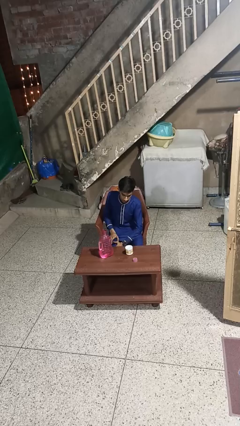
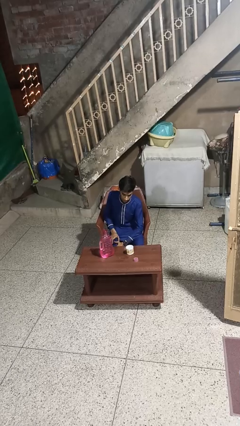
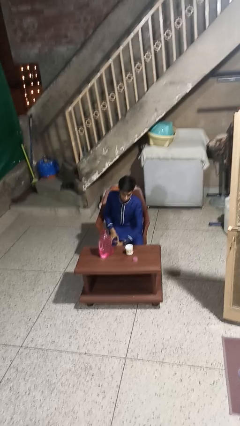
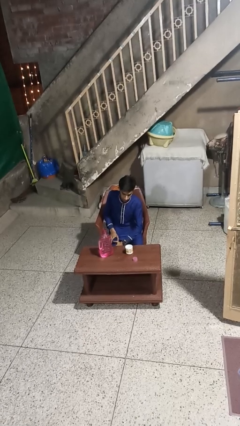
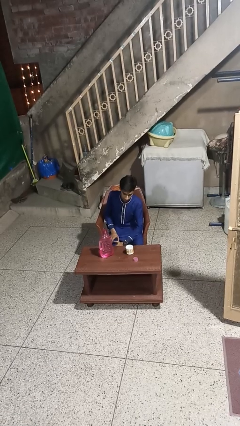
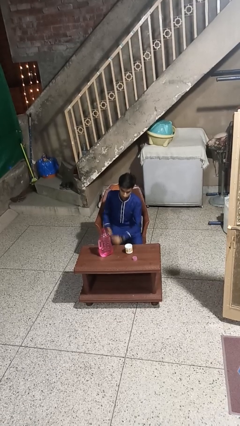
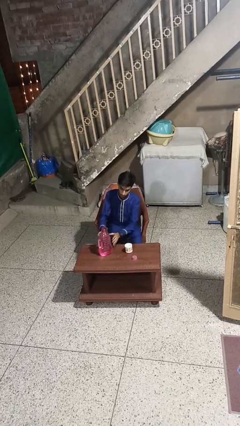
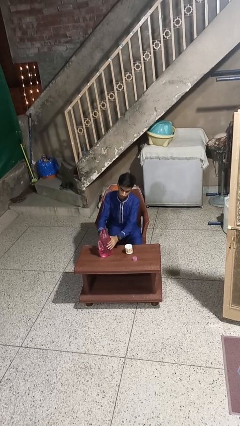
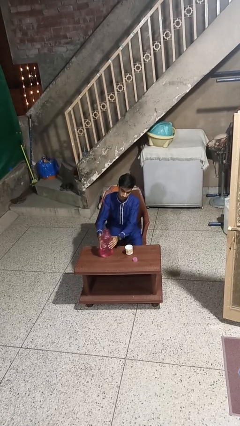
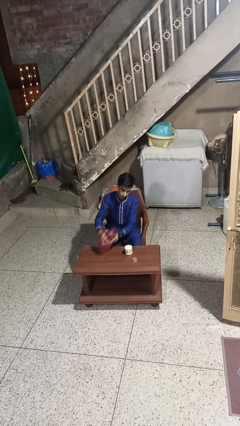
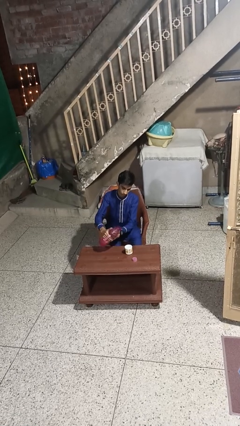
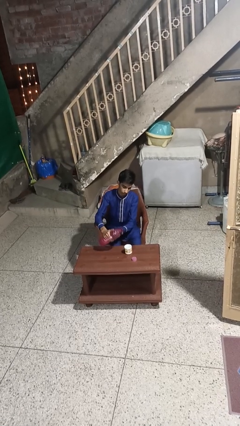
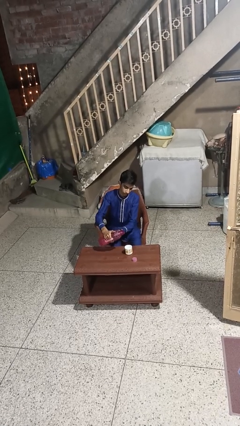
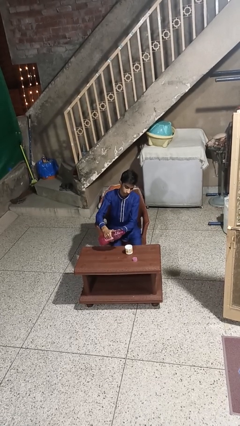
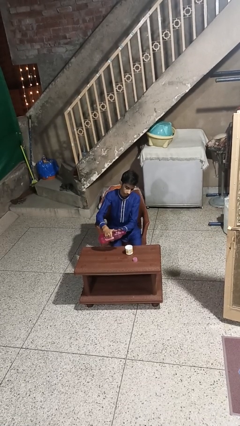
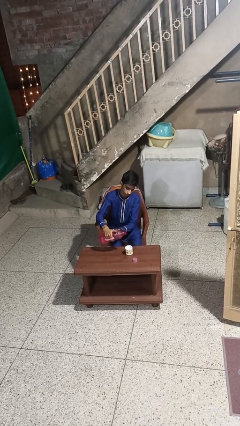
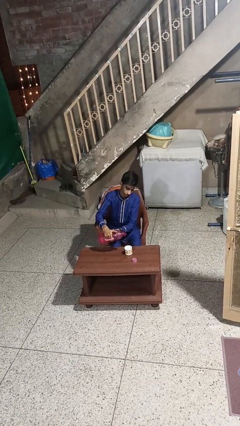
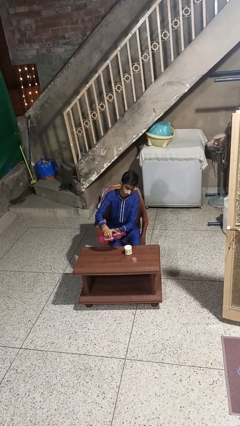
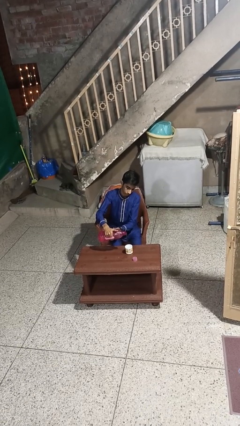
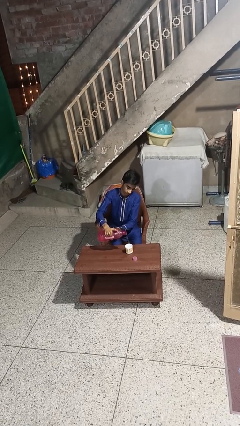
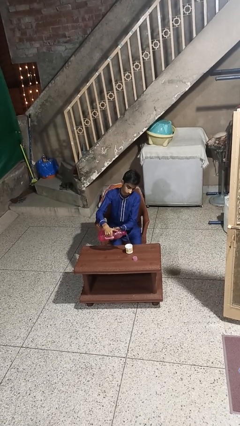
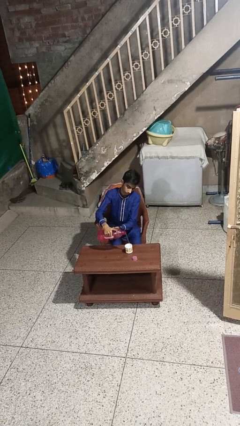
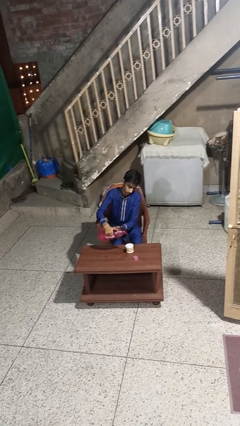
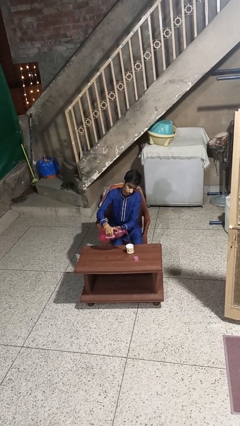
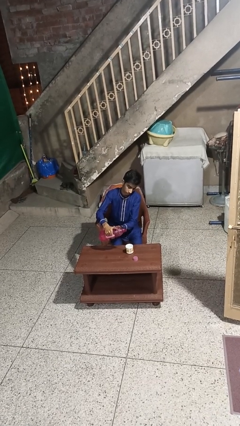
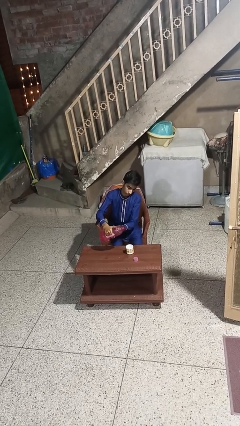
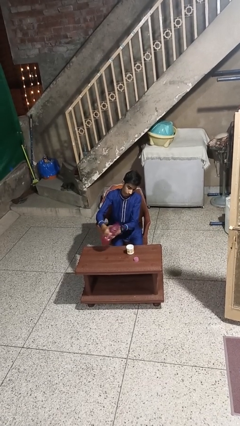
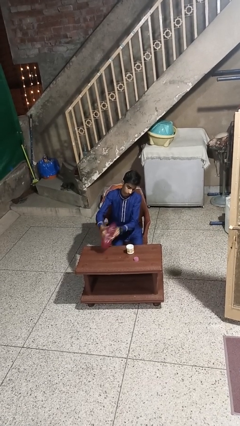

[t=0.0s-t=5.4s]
person pours liquid into cup

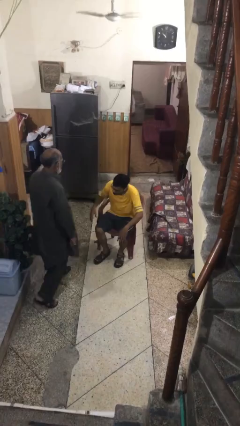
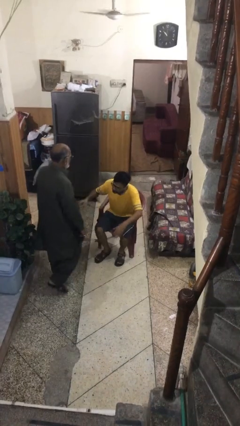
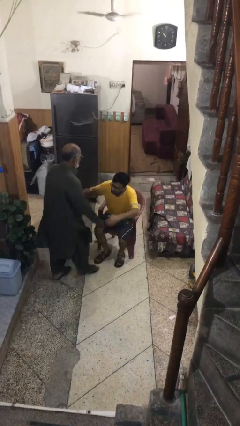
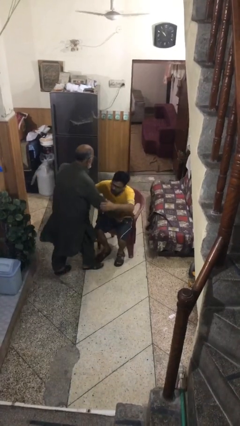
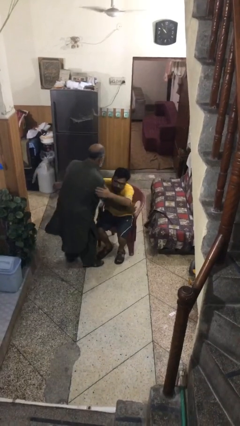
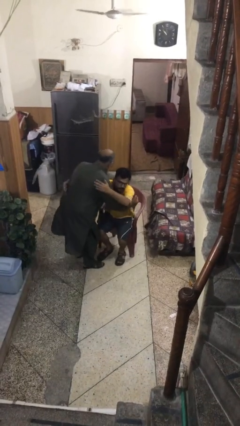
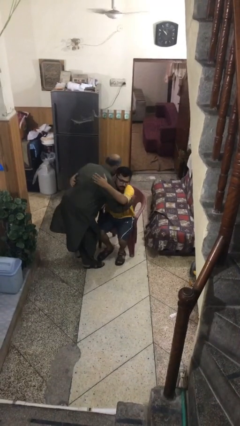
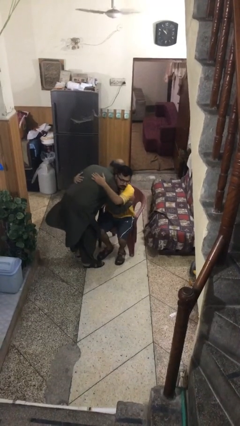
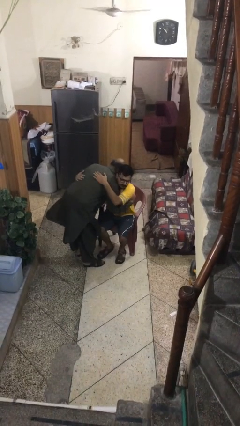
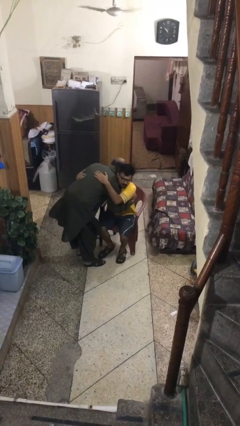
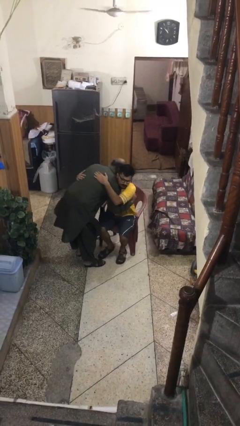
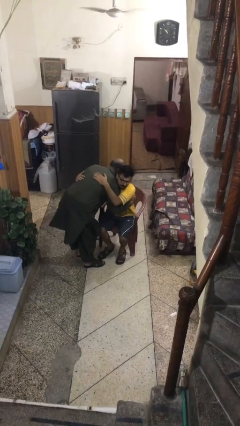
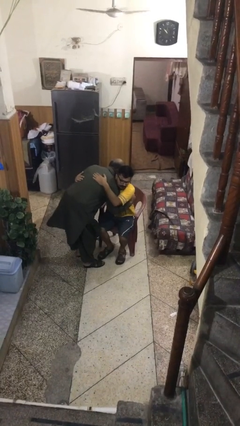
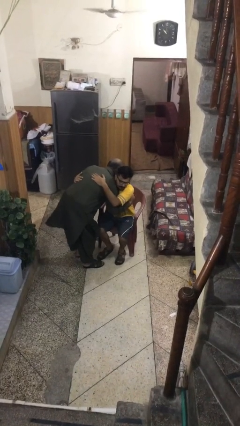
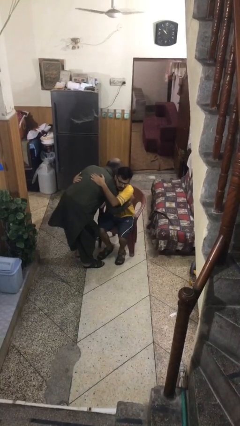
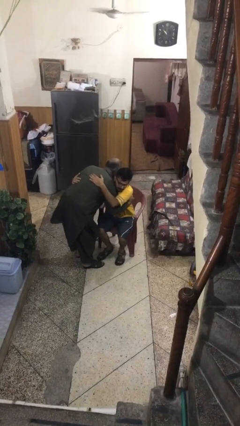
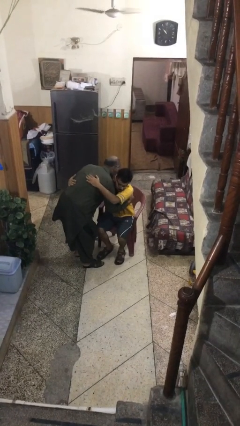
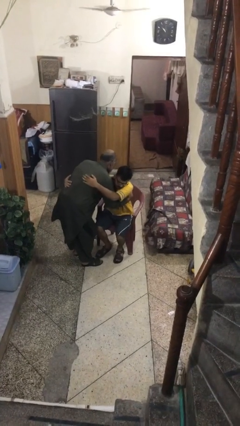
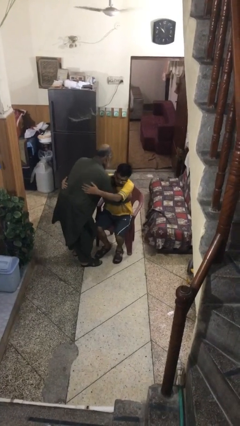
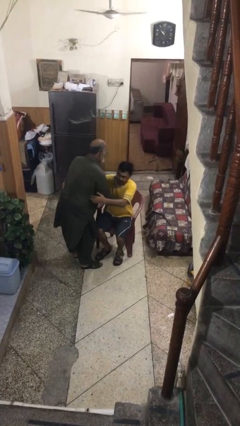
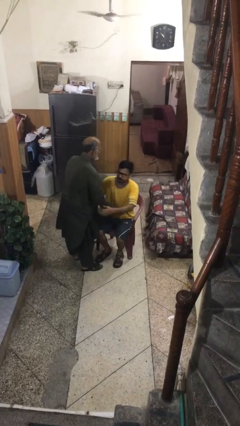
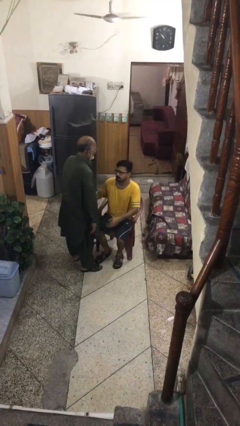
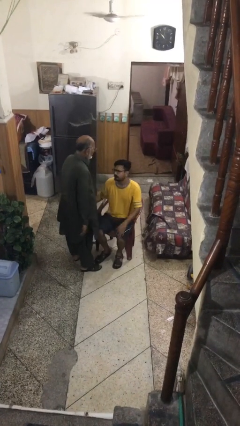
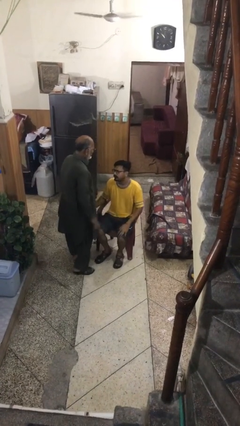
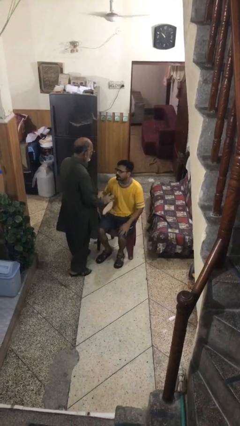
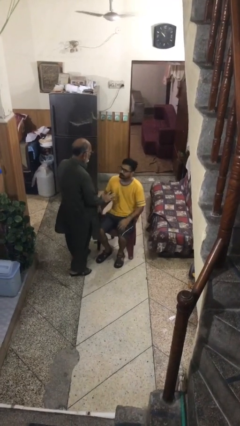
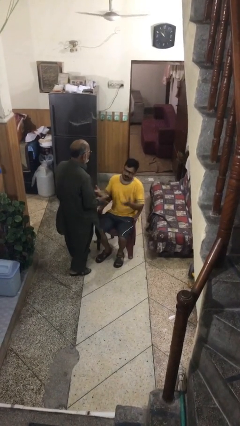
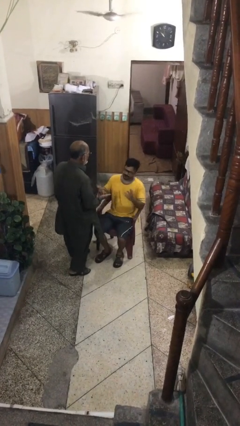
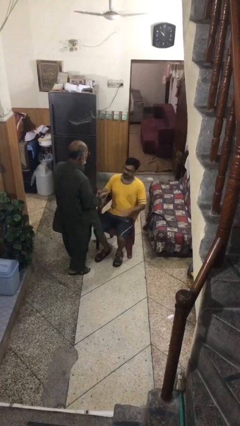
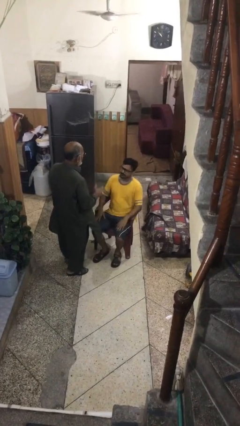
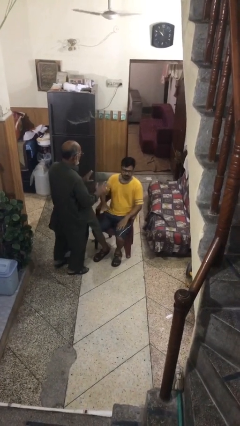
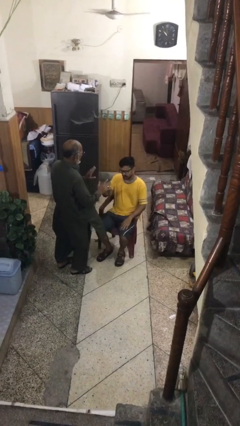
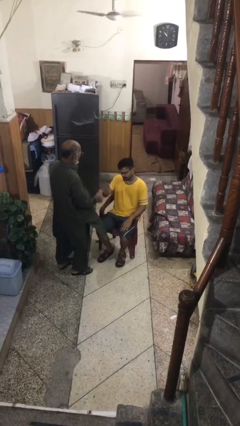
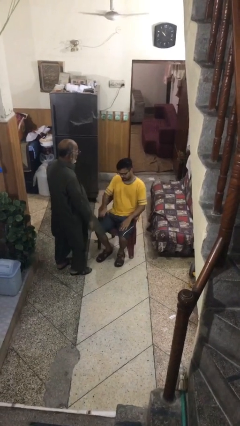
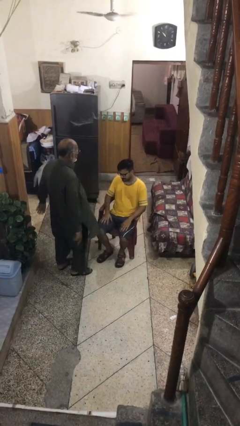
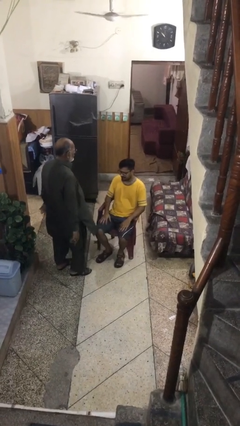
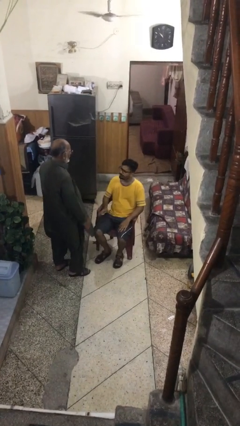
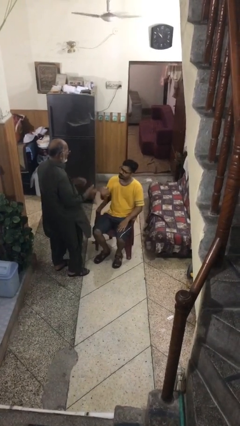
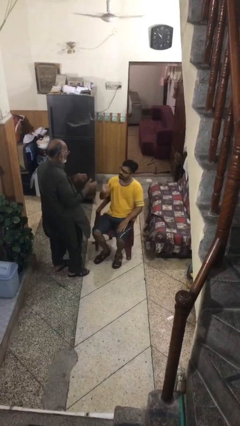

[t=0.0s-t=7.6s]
person embraces person

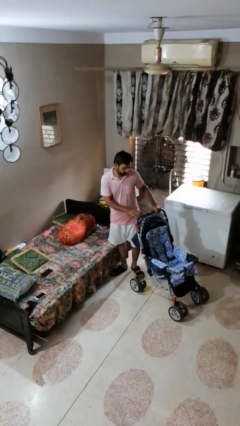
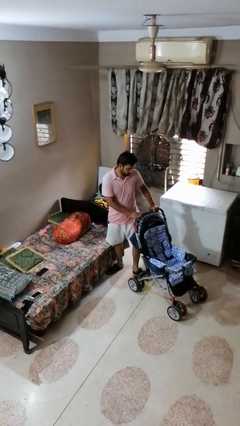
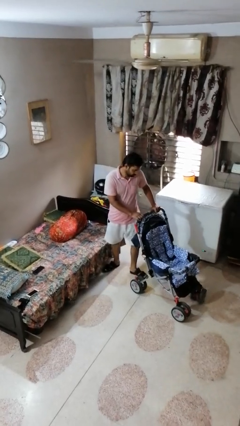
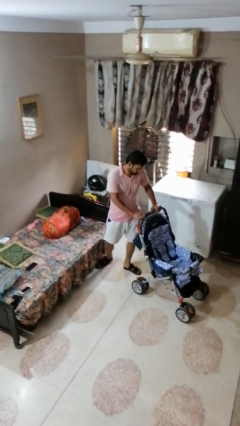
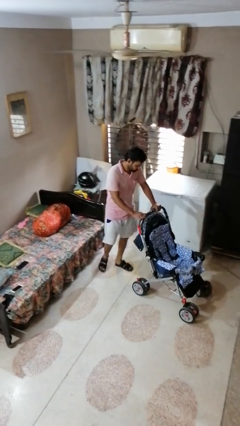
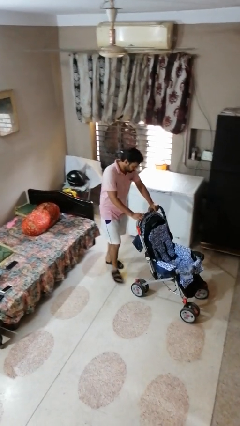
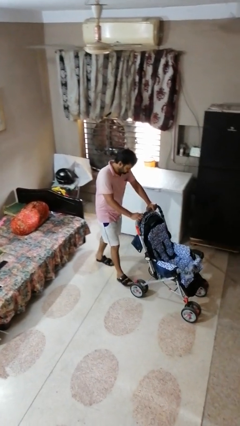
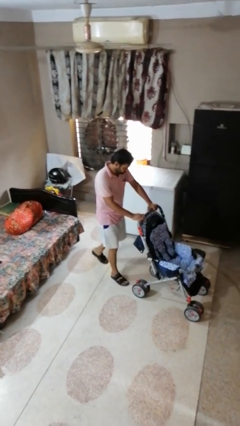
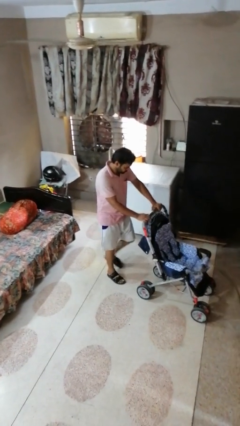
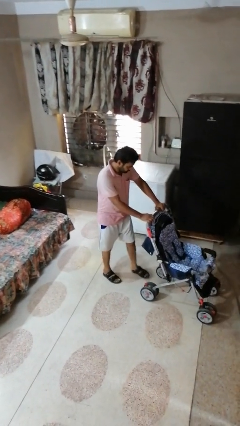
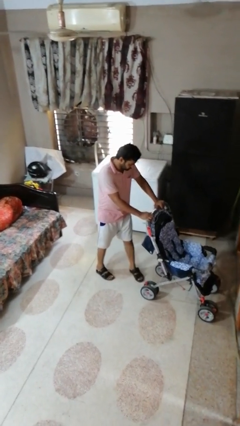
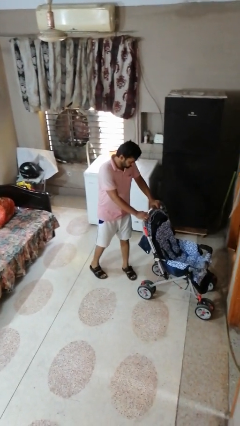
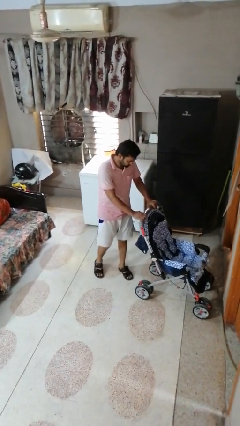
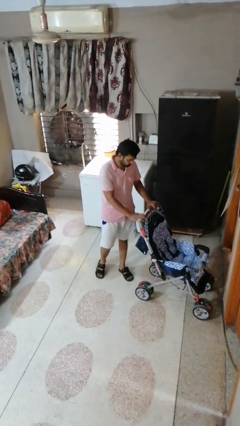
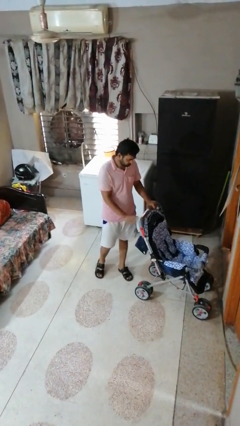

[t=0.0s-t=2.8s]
person pushes wheeled cart

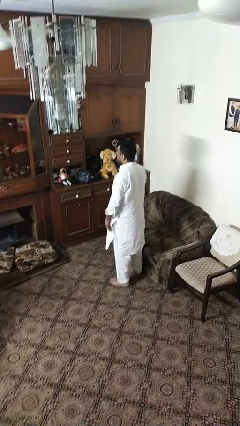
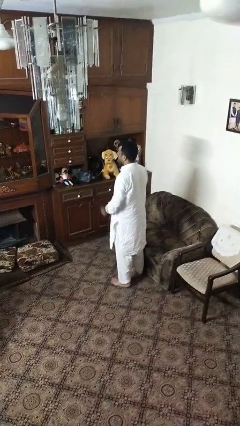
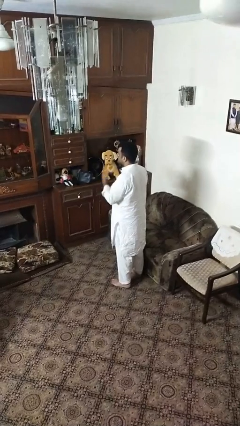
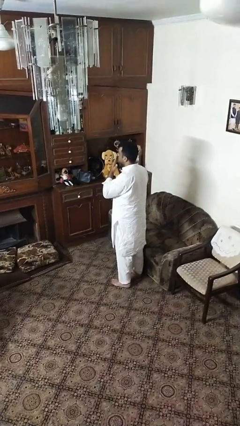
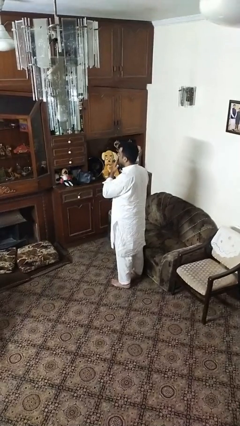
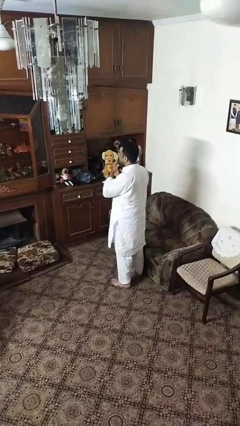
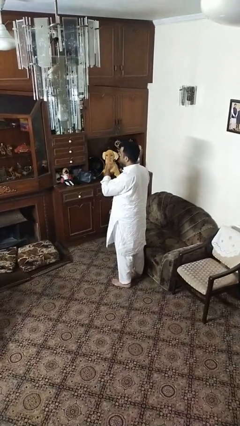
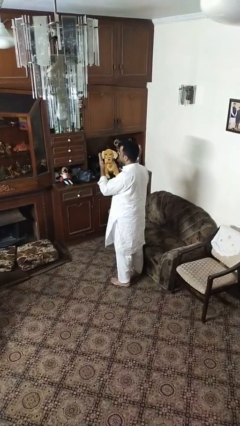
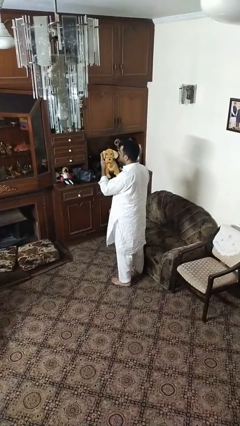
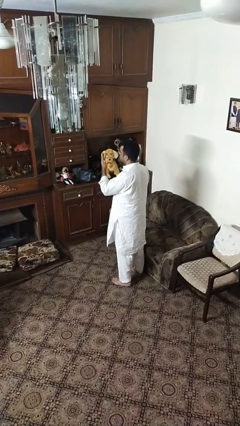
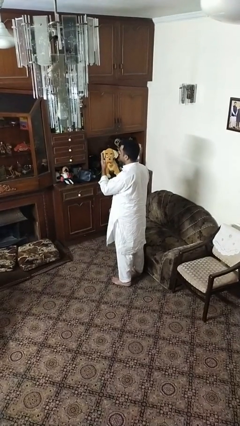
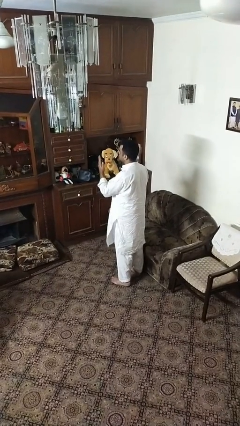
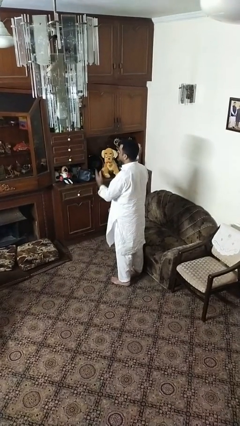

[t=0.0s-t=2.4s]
person gestures blow kiss
